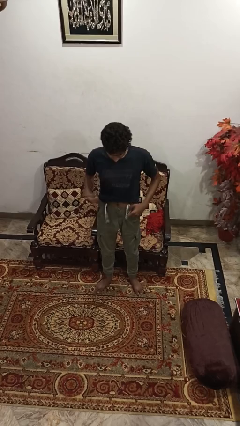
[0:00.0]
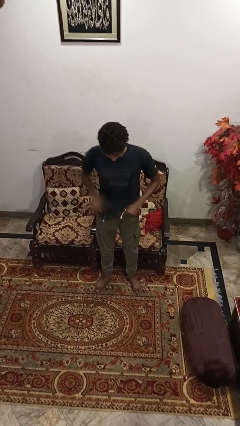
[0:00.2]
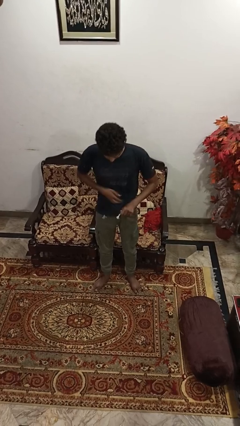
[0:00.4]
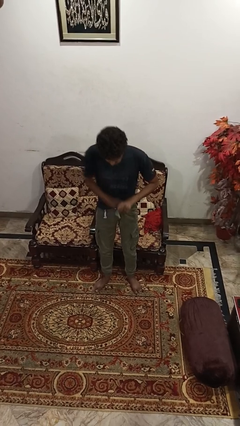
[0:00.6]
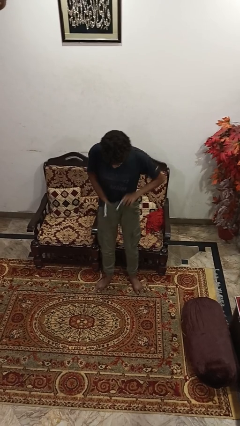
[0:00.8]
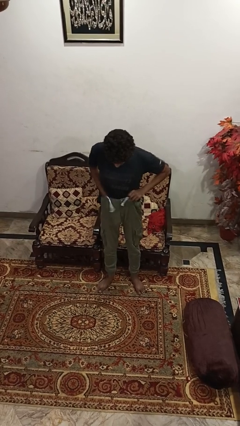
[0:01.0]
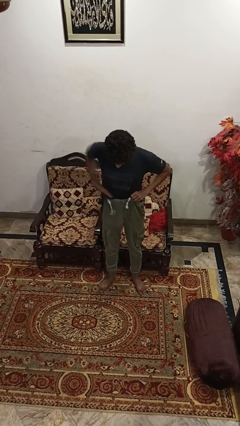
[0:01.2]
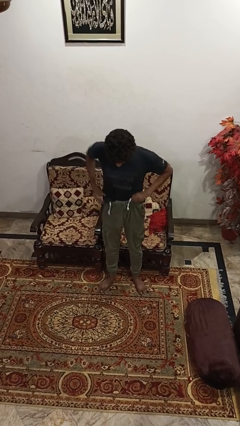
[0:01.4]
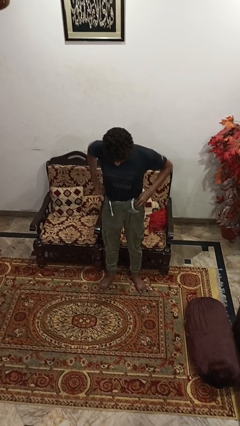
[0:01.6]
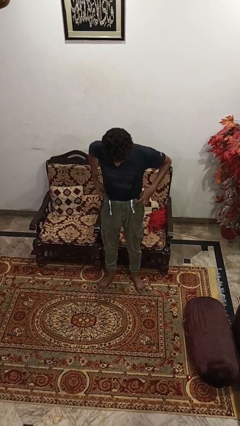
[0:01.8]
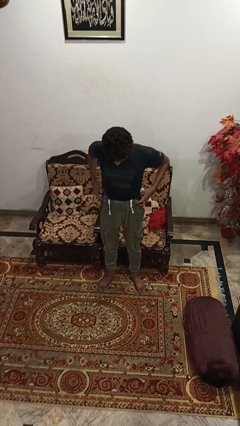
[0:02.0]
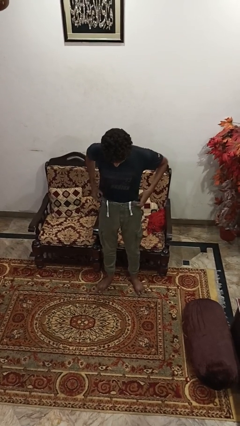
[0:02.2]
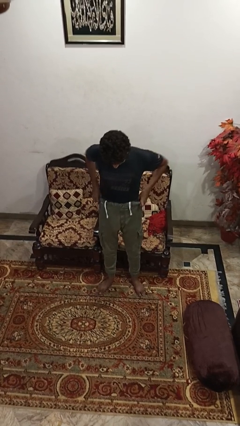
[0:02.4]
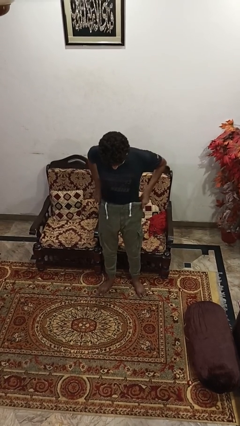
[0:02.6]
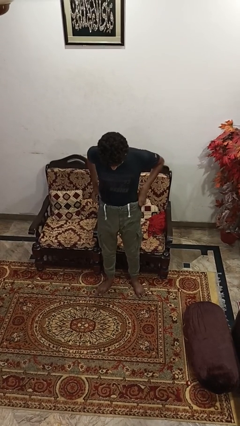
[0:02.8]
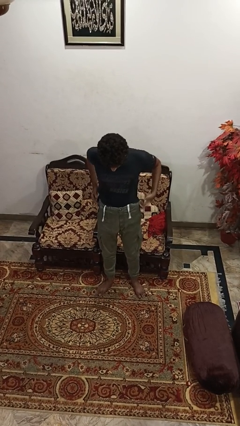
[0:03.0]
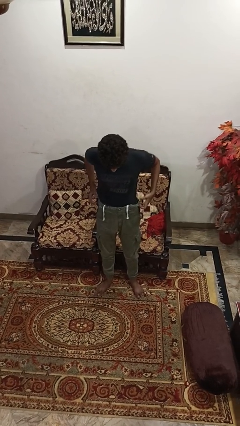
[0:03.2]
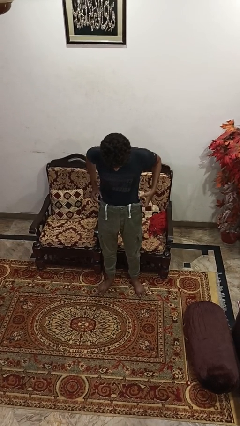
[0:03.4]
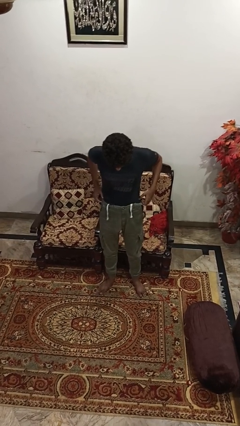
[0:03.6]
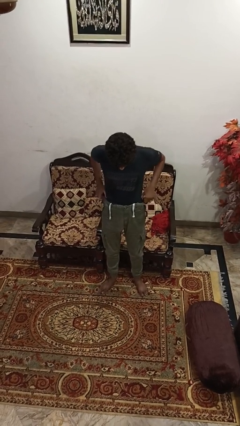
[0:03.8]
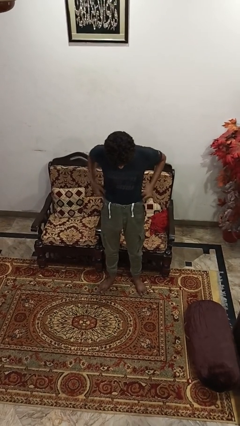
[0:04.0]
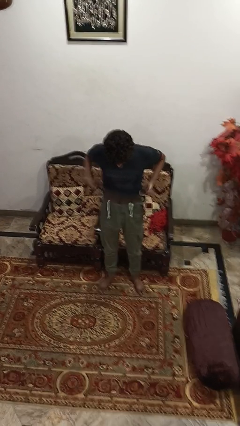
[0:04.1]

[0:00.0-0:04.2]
person tucks in shirt

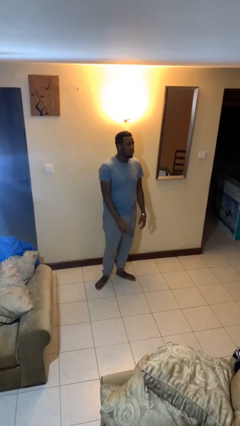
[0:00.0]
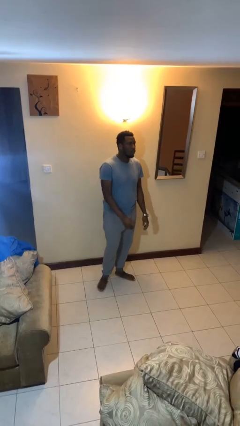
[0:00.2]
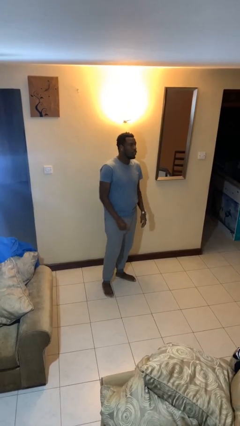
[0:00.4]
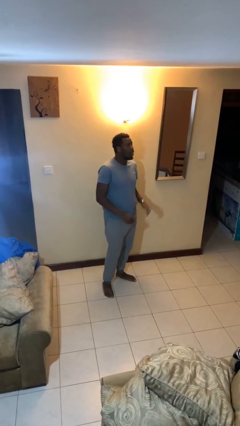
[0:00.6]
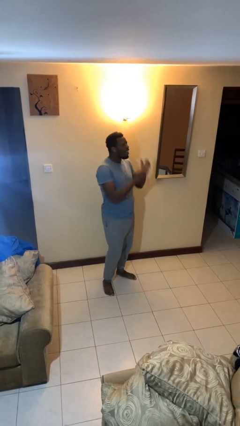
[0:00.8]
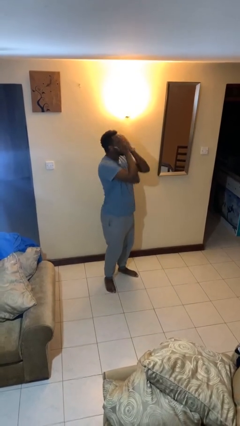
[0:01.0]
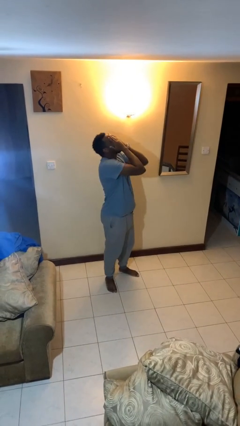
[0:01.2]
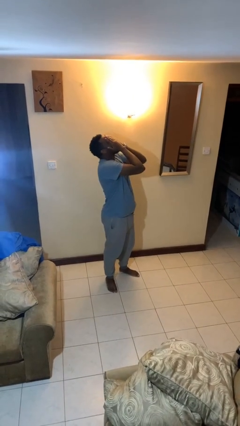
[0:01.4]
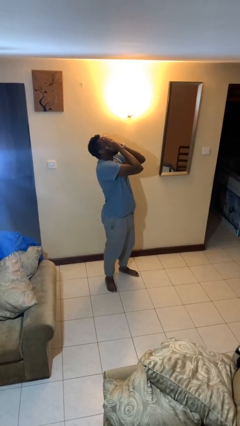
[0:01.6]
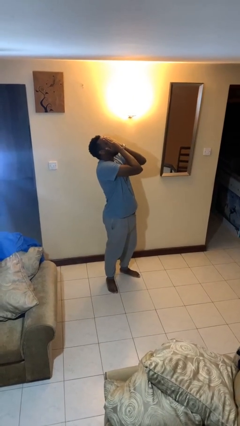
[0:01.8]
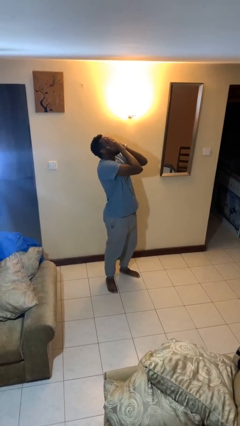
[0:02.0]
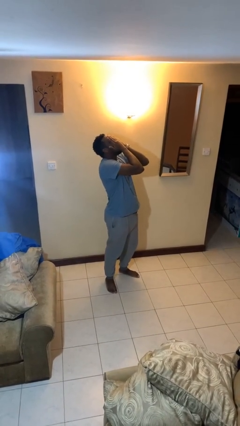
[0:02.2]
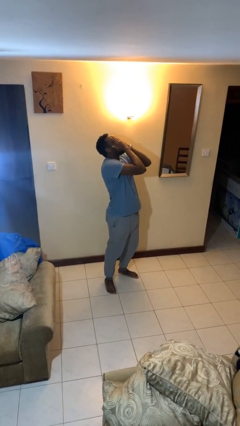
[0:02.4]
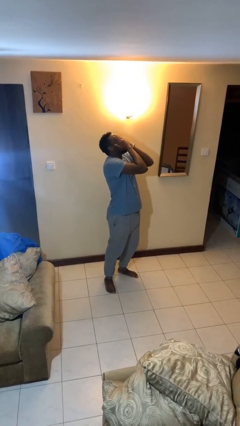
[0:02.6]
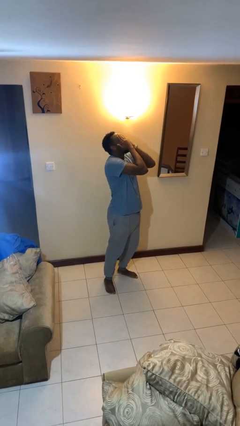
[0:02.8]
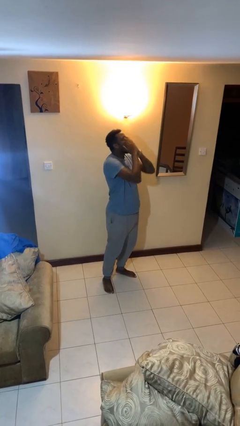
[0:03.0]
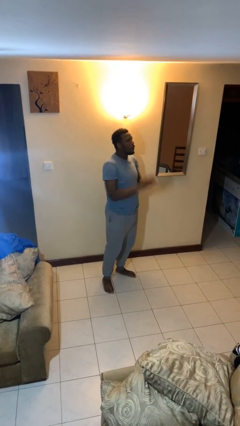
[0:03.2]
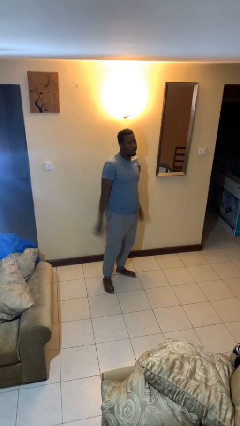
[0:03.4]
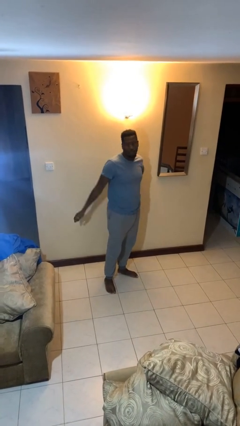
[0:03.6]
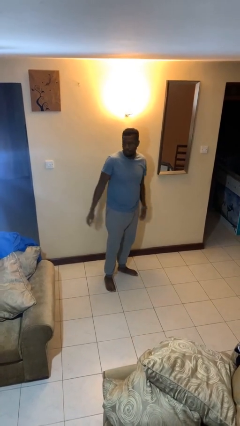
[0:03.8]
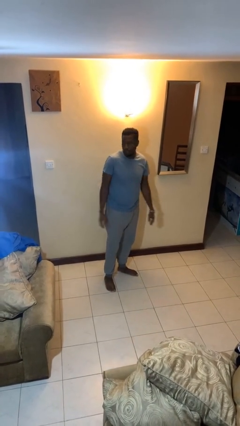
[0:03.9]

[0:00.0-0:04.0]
person covers face with hands

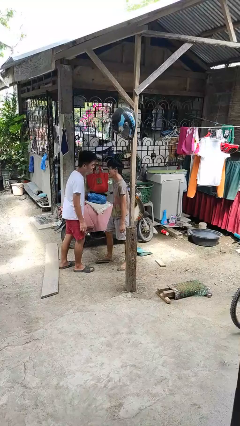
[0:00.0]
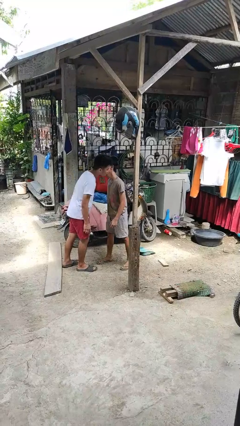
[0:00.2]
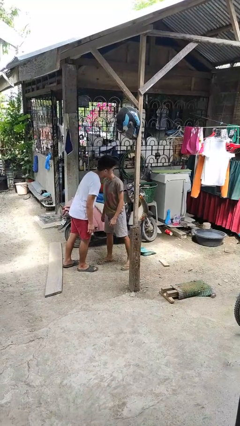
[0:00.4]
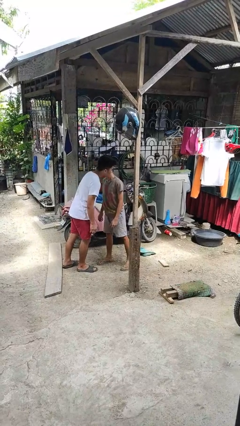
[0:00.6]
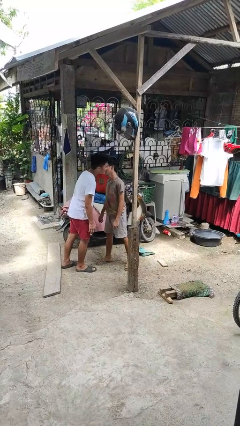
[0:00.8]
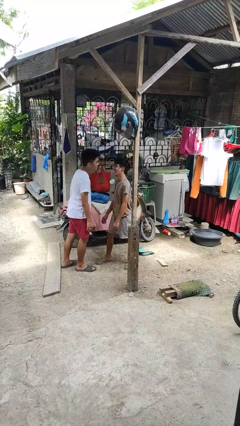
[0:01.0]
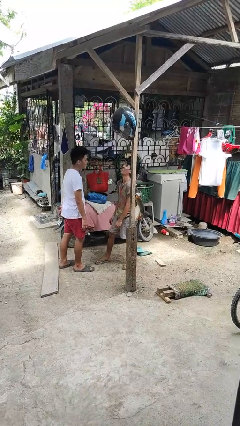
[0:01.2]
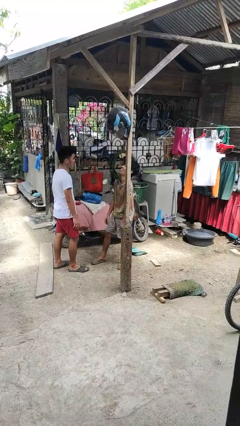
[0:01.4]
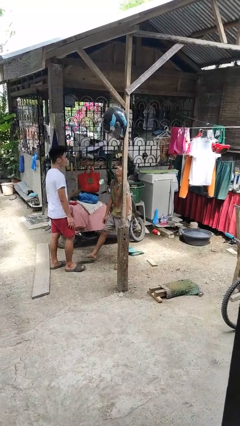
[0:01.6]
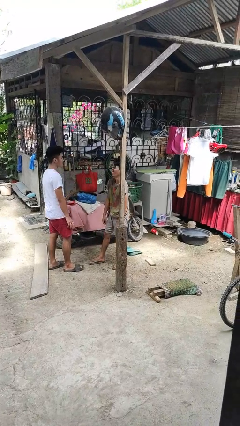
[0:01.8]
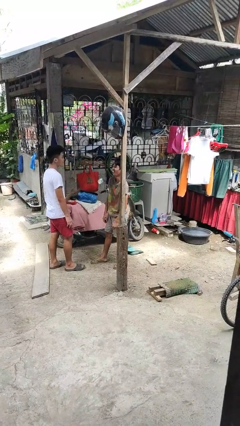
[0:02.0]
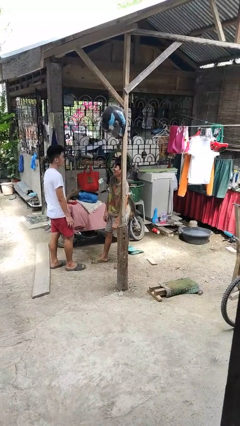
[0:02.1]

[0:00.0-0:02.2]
person kisses cheek of person

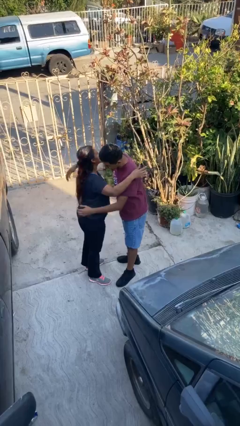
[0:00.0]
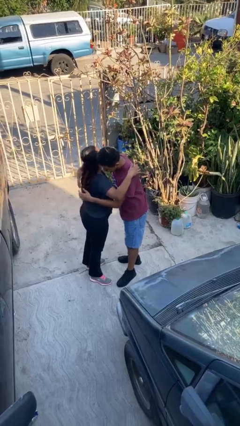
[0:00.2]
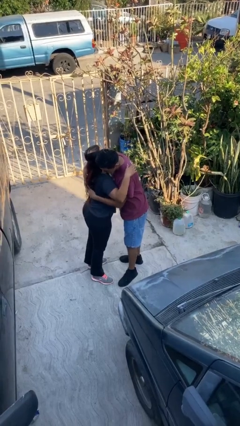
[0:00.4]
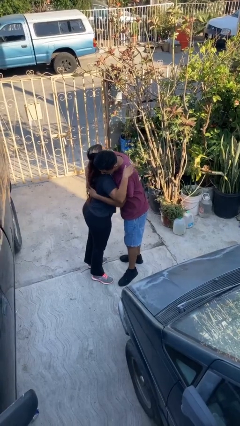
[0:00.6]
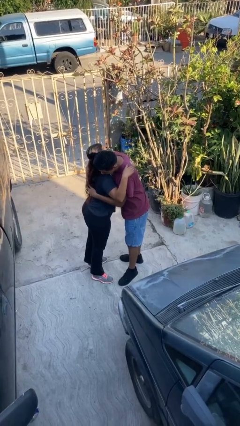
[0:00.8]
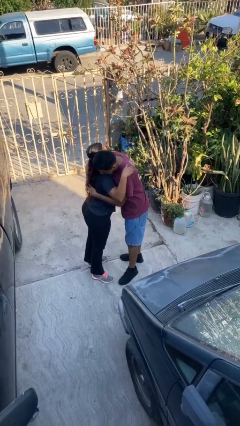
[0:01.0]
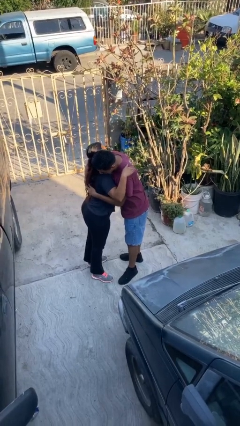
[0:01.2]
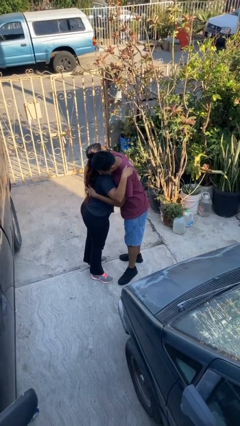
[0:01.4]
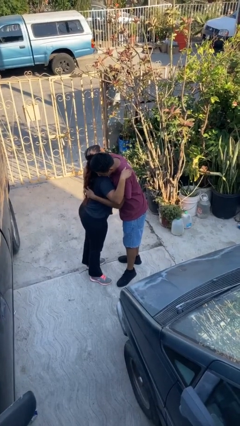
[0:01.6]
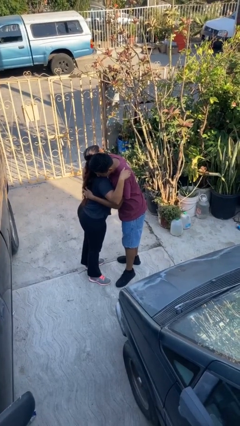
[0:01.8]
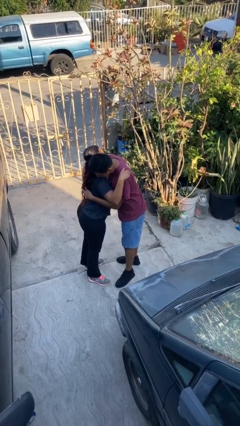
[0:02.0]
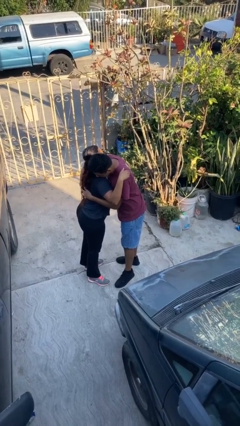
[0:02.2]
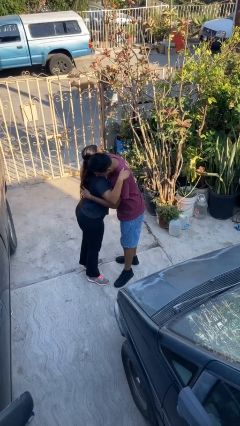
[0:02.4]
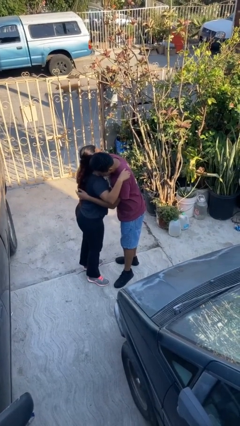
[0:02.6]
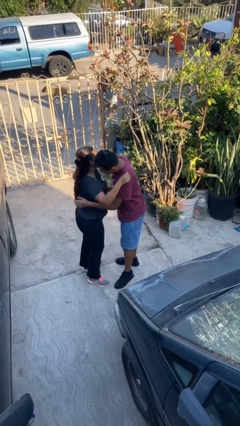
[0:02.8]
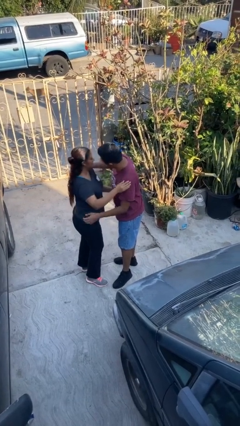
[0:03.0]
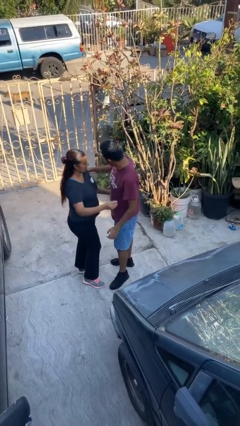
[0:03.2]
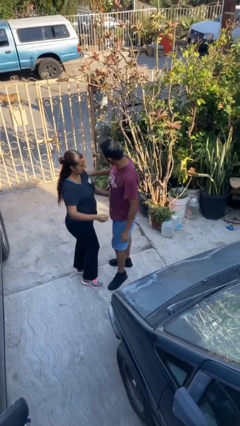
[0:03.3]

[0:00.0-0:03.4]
person embraces person

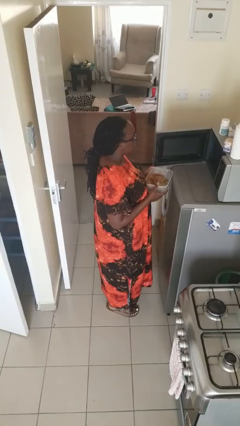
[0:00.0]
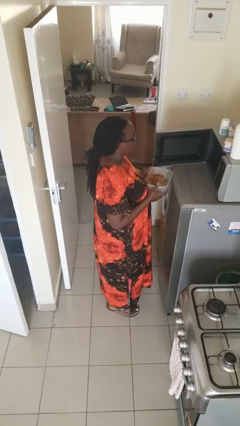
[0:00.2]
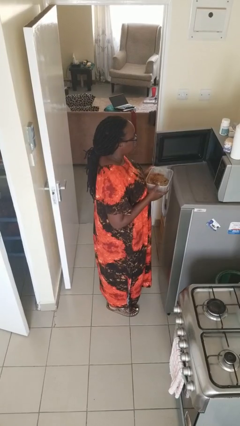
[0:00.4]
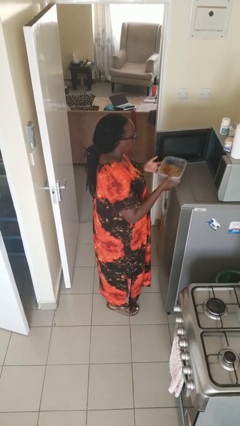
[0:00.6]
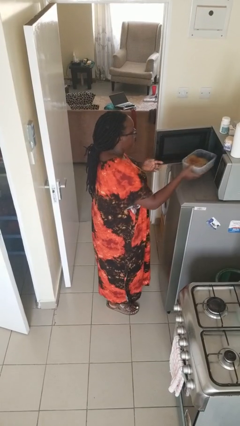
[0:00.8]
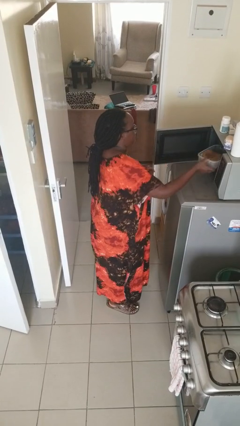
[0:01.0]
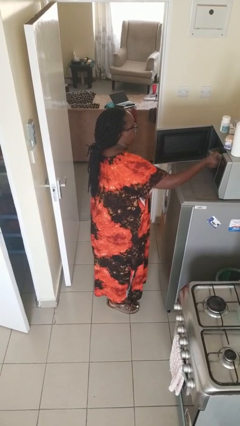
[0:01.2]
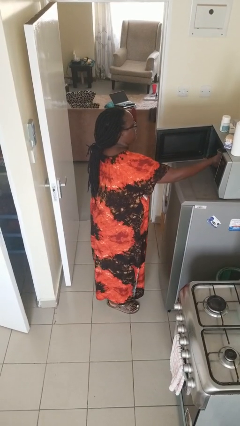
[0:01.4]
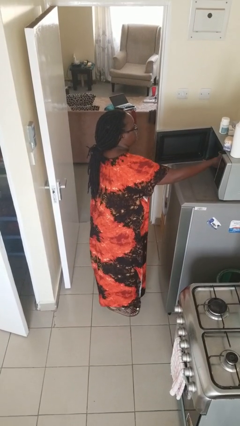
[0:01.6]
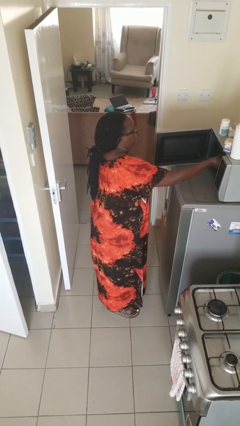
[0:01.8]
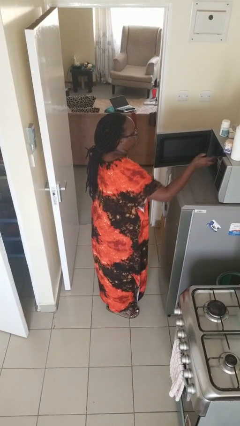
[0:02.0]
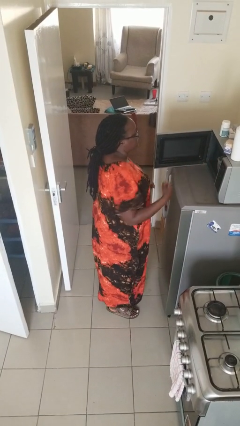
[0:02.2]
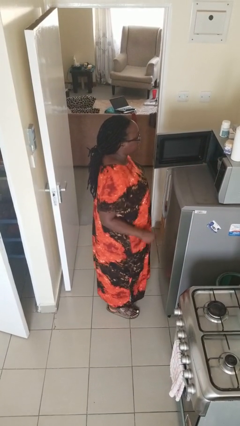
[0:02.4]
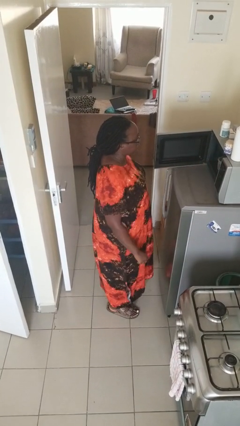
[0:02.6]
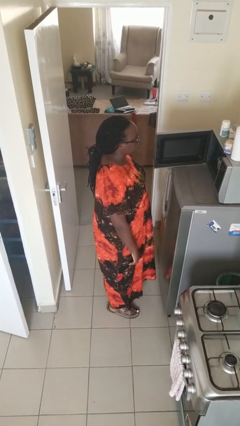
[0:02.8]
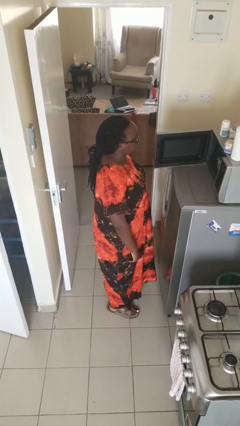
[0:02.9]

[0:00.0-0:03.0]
person puts object into microwave

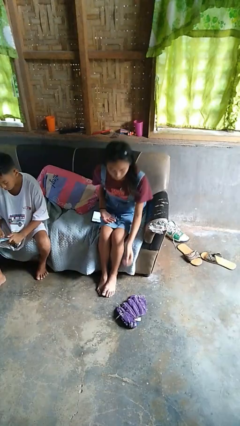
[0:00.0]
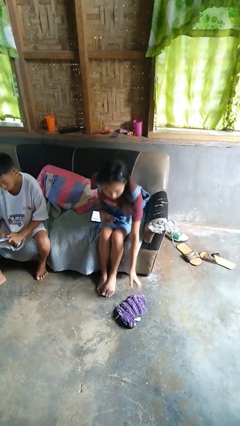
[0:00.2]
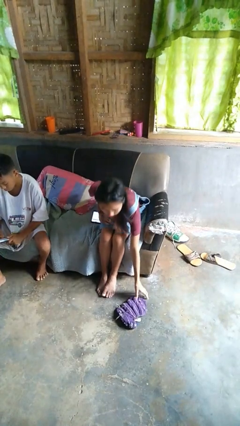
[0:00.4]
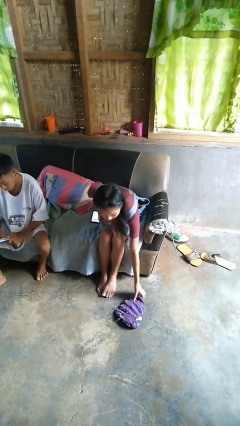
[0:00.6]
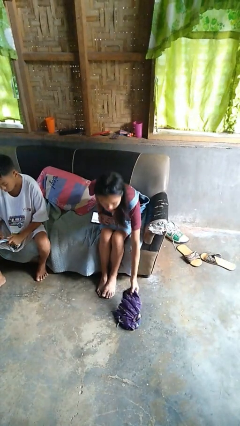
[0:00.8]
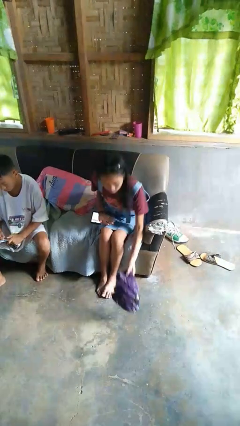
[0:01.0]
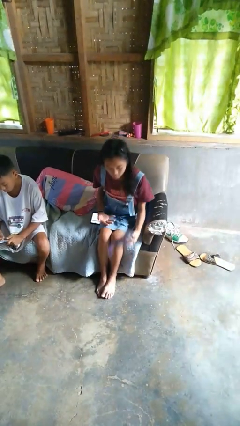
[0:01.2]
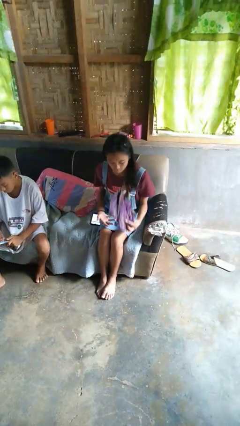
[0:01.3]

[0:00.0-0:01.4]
person picks up object from floor
